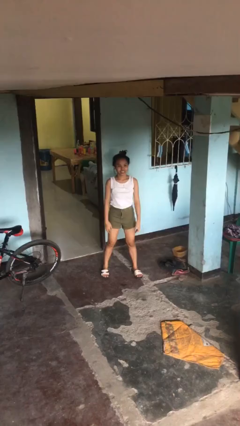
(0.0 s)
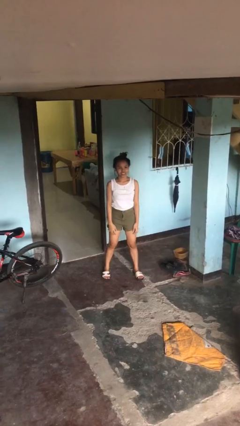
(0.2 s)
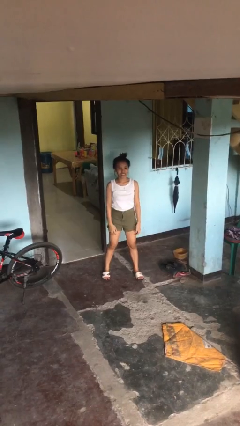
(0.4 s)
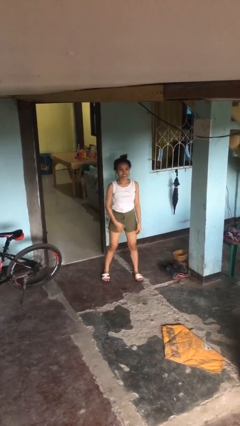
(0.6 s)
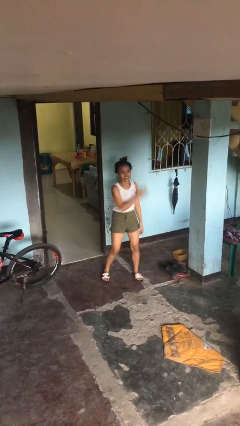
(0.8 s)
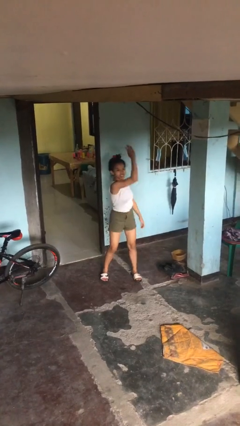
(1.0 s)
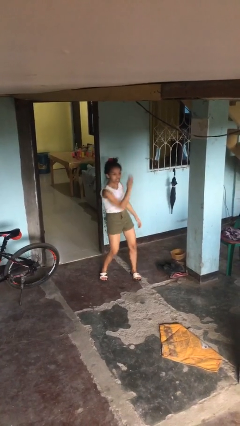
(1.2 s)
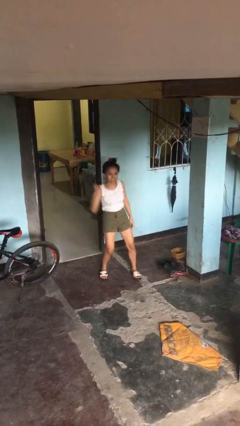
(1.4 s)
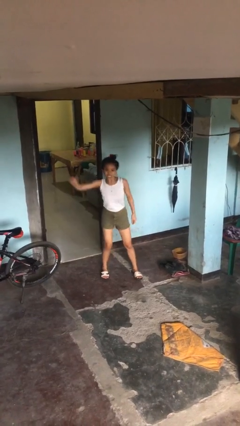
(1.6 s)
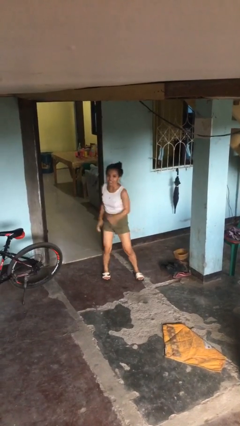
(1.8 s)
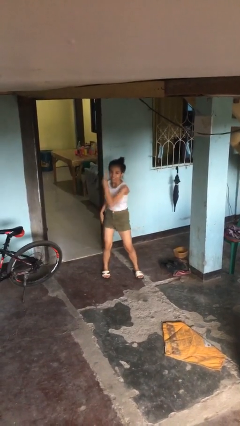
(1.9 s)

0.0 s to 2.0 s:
person dances in place

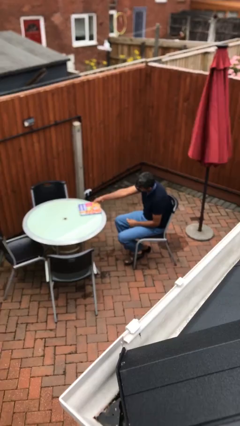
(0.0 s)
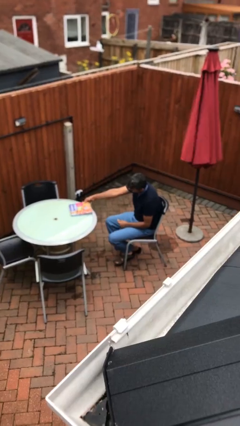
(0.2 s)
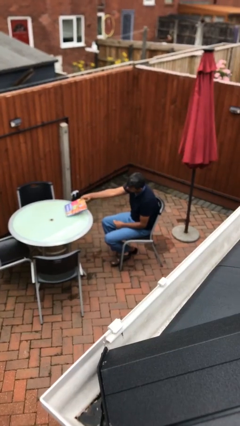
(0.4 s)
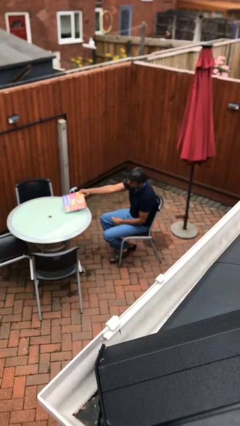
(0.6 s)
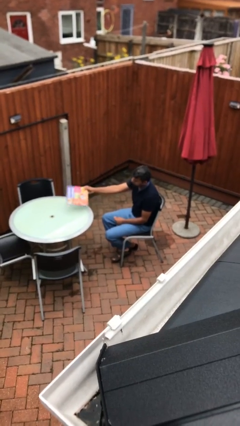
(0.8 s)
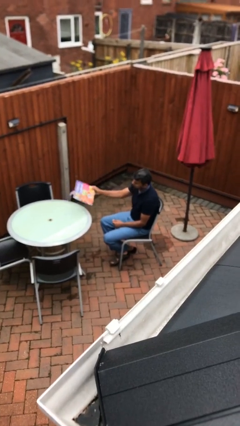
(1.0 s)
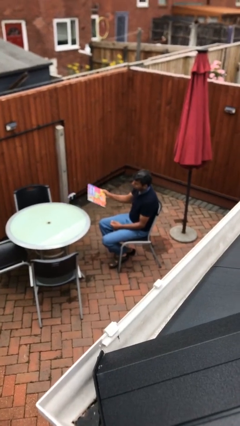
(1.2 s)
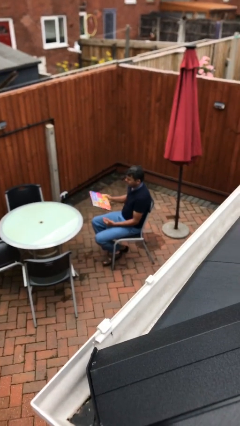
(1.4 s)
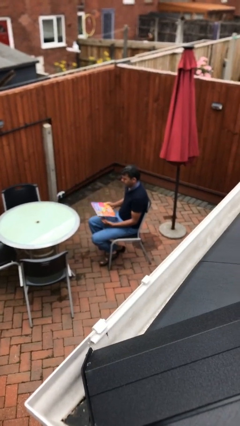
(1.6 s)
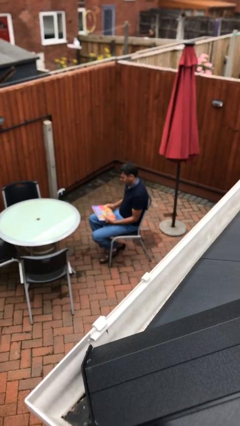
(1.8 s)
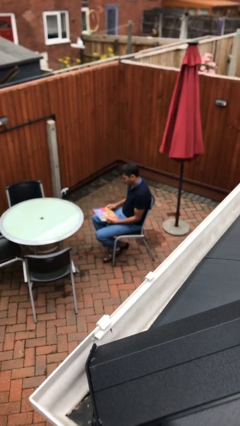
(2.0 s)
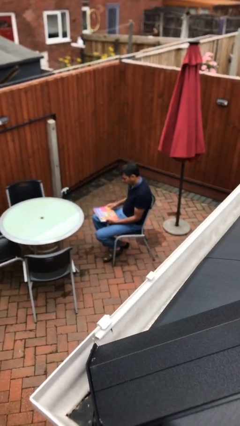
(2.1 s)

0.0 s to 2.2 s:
person picks up object from table

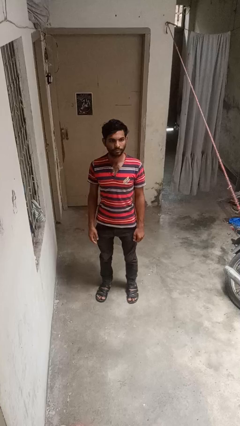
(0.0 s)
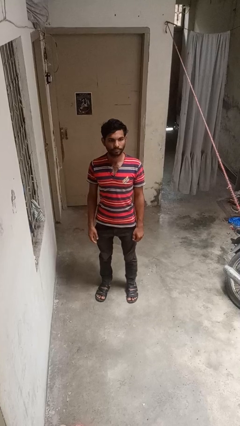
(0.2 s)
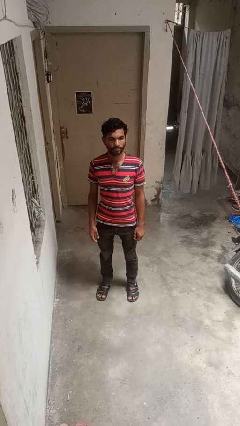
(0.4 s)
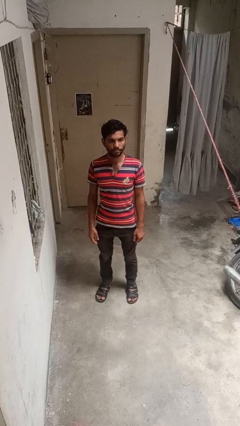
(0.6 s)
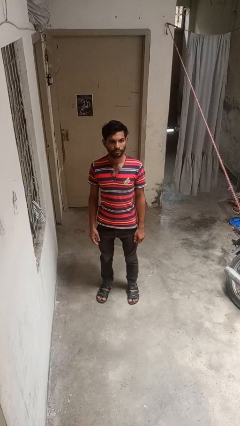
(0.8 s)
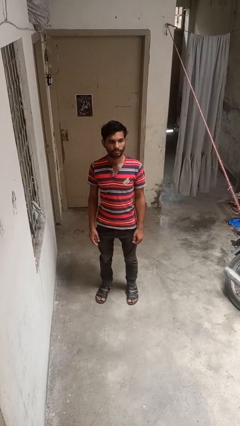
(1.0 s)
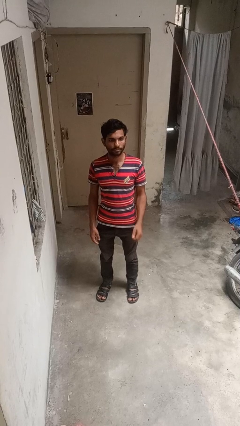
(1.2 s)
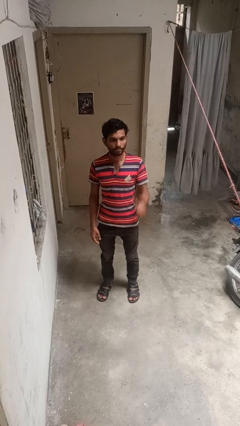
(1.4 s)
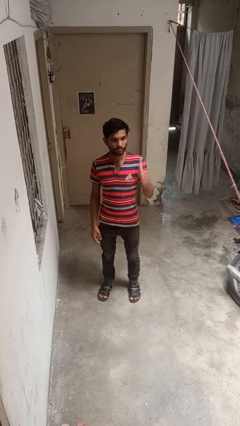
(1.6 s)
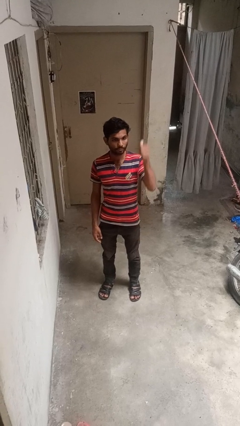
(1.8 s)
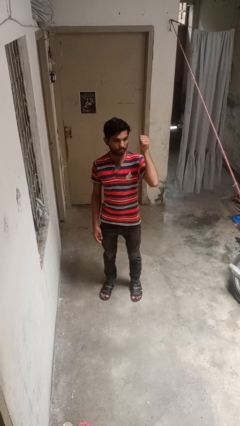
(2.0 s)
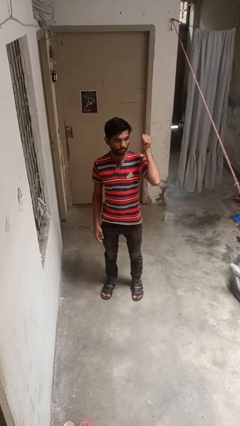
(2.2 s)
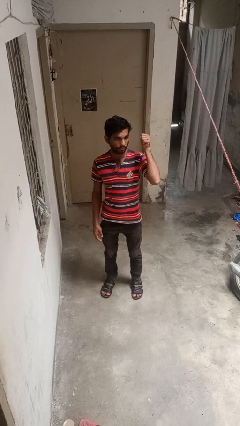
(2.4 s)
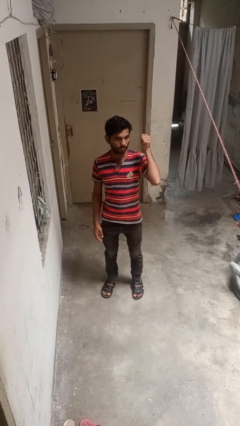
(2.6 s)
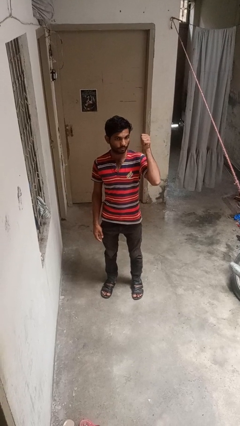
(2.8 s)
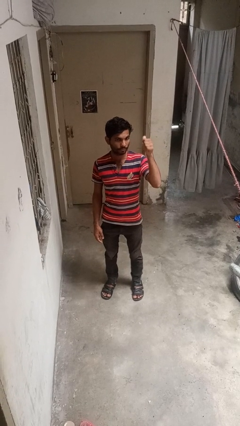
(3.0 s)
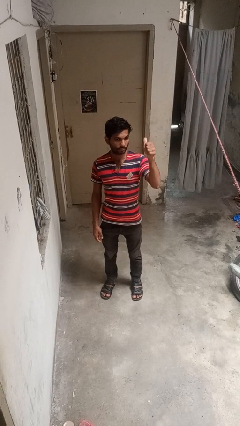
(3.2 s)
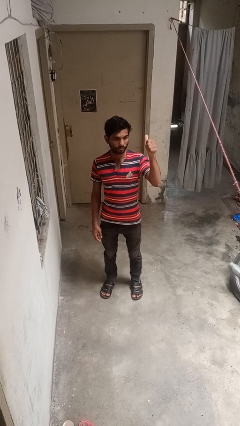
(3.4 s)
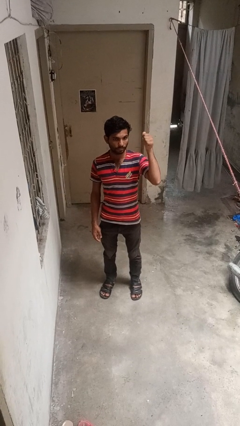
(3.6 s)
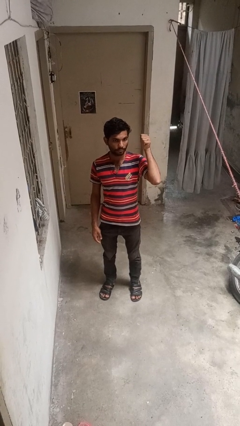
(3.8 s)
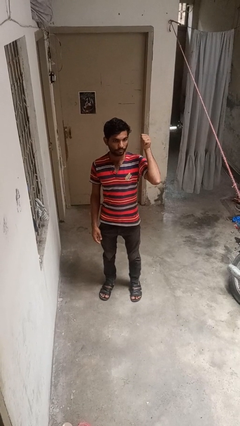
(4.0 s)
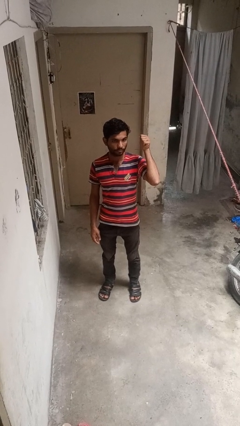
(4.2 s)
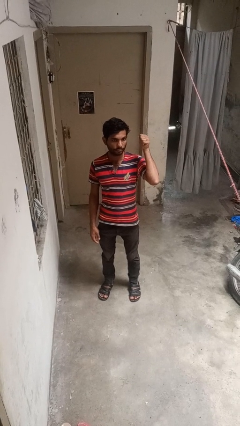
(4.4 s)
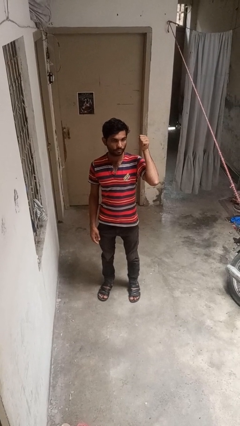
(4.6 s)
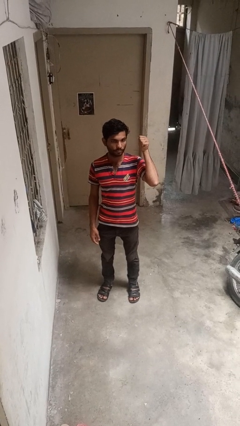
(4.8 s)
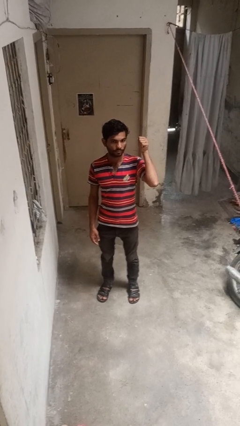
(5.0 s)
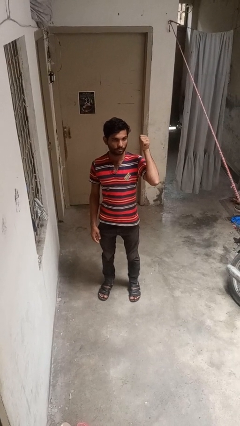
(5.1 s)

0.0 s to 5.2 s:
person gestures behind me

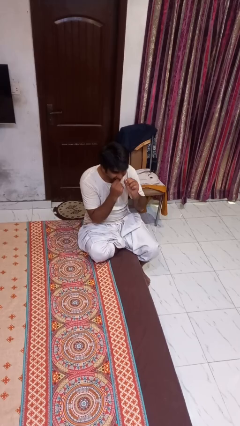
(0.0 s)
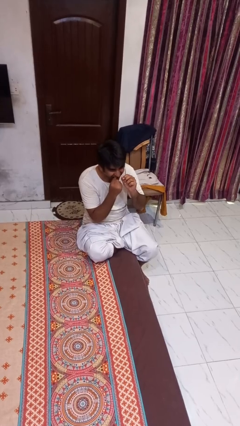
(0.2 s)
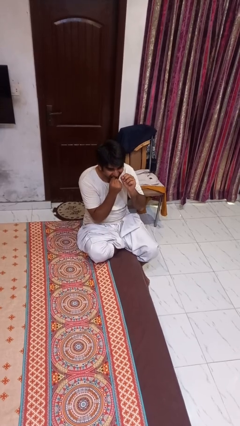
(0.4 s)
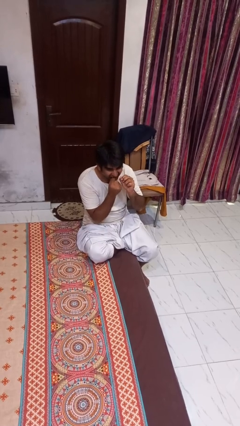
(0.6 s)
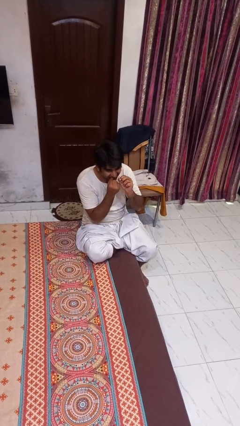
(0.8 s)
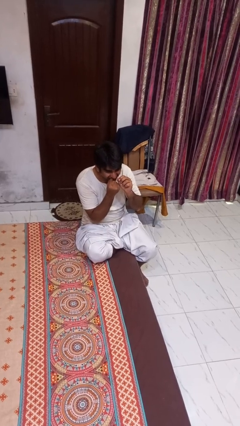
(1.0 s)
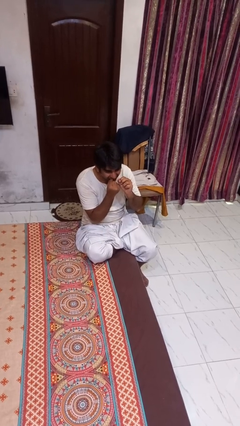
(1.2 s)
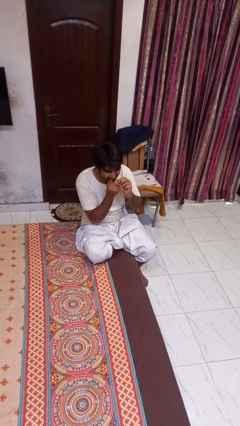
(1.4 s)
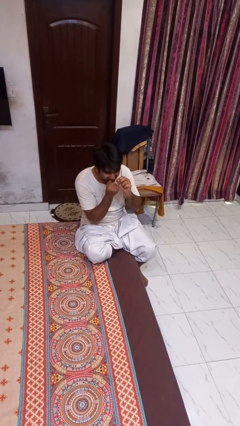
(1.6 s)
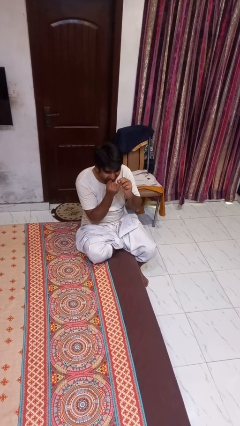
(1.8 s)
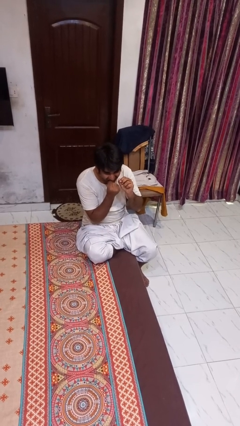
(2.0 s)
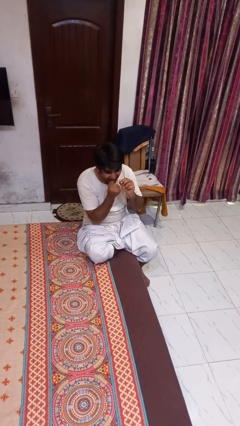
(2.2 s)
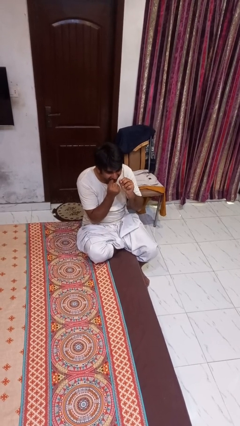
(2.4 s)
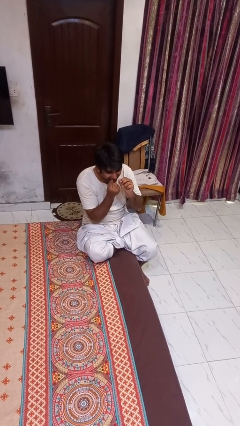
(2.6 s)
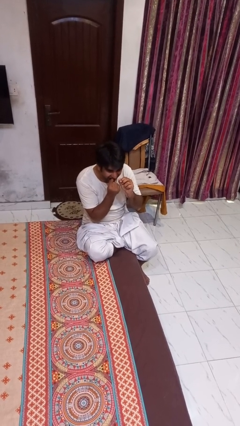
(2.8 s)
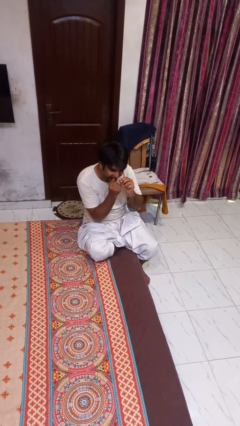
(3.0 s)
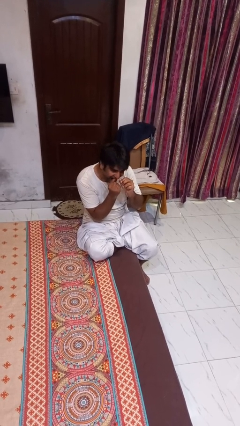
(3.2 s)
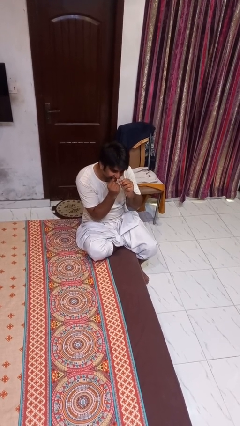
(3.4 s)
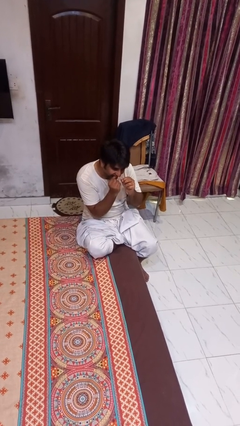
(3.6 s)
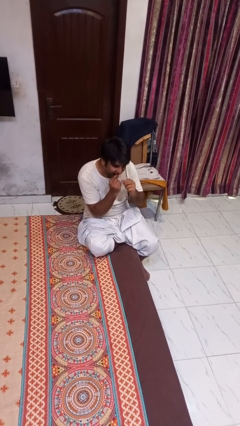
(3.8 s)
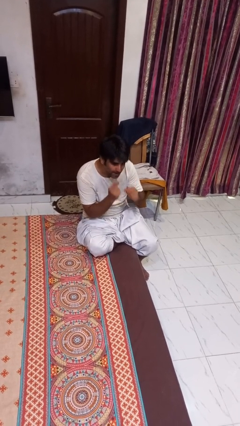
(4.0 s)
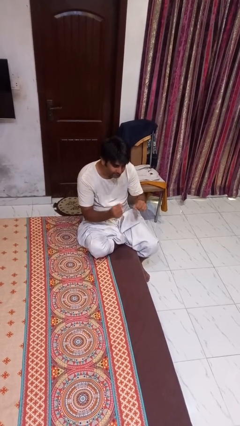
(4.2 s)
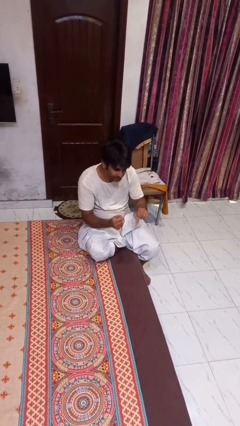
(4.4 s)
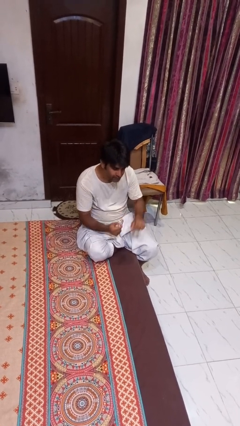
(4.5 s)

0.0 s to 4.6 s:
person flosses

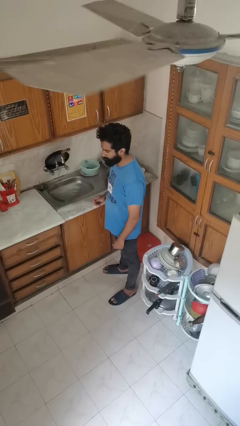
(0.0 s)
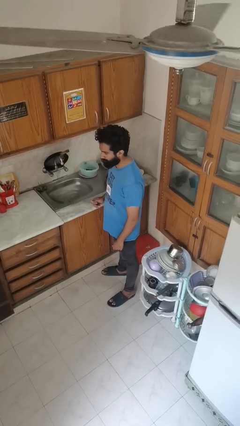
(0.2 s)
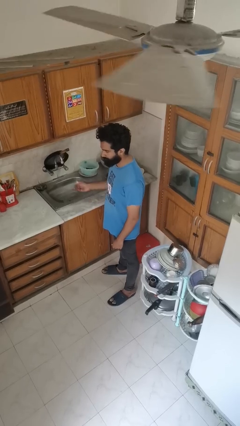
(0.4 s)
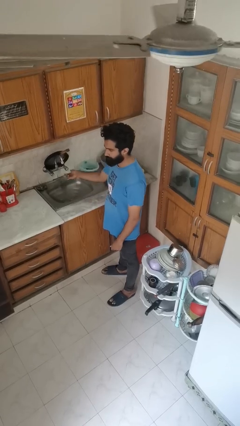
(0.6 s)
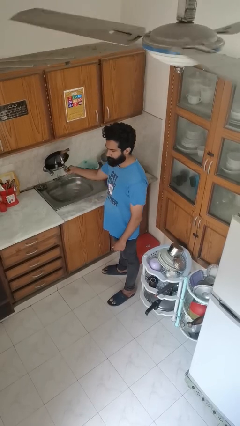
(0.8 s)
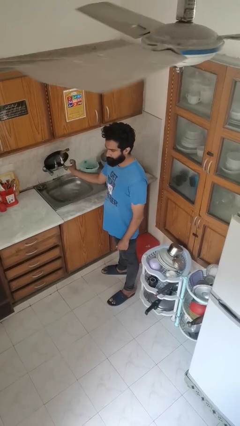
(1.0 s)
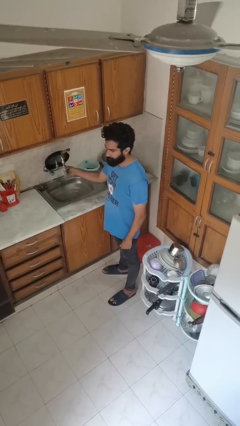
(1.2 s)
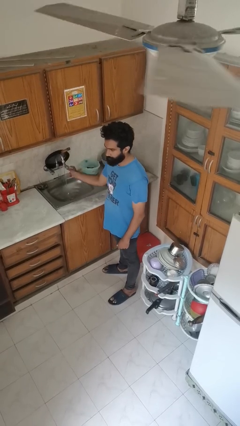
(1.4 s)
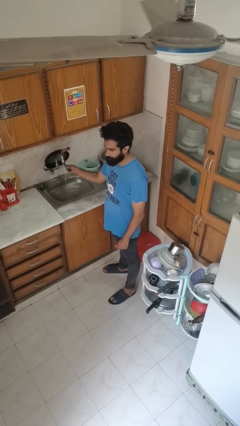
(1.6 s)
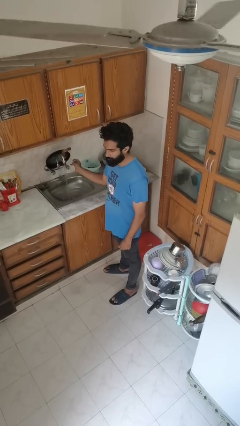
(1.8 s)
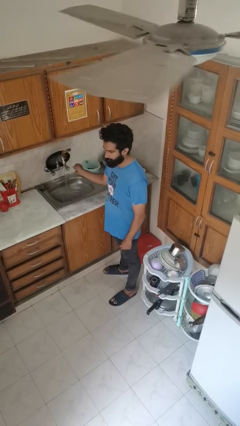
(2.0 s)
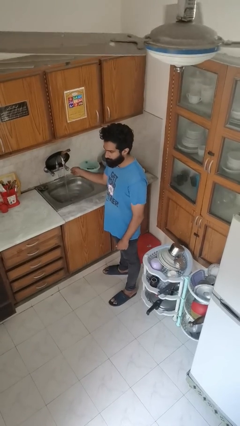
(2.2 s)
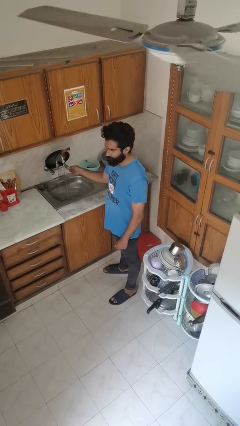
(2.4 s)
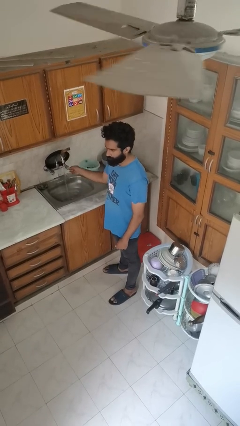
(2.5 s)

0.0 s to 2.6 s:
person turns on faucet

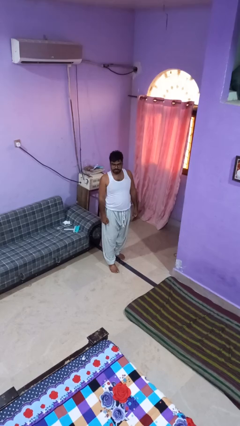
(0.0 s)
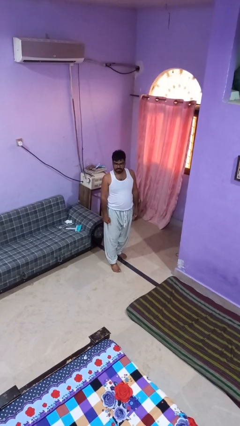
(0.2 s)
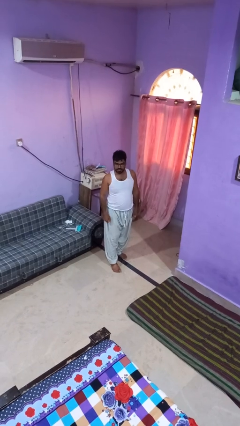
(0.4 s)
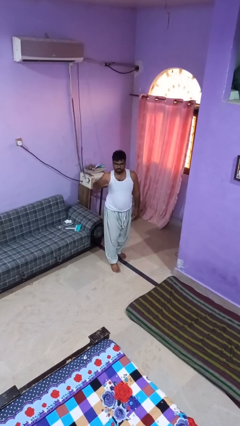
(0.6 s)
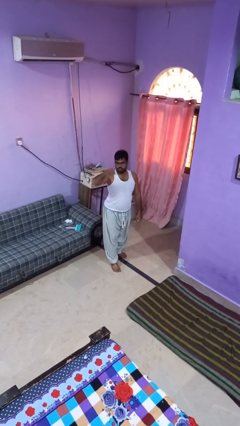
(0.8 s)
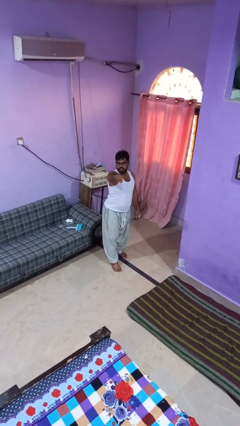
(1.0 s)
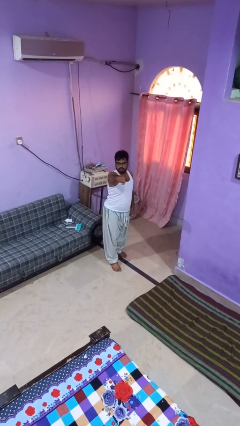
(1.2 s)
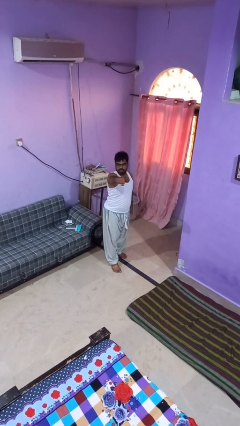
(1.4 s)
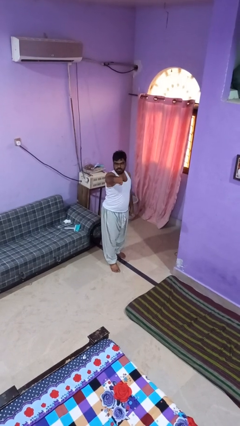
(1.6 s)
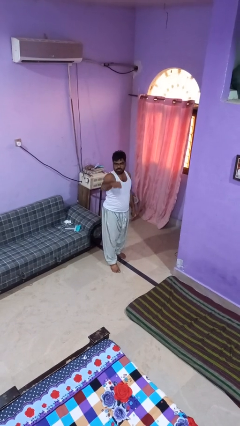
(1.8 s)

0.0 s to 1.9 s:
person punches
